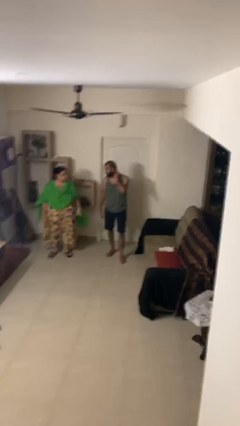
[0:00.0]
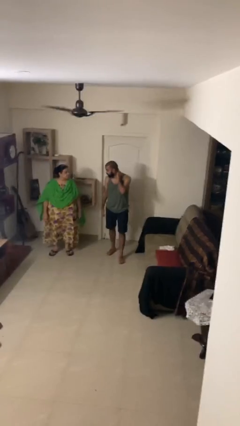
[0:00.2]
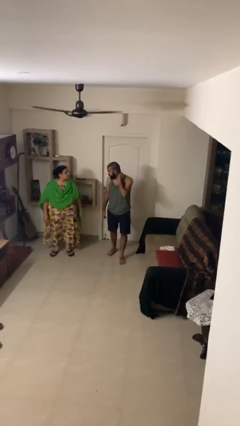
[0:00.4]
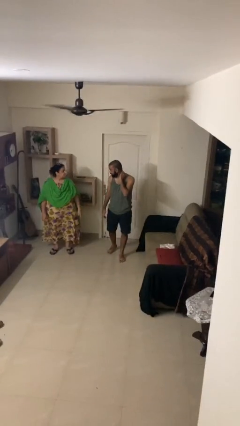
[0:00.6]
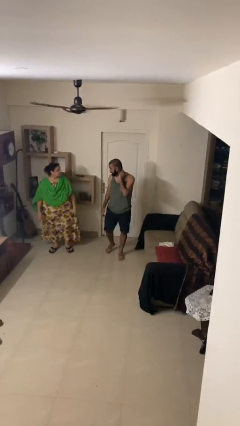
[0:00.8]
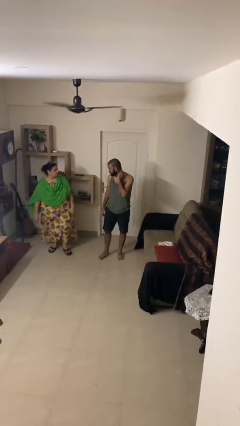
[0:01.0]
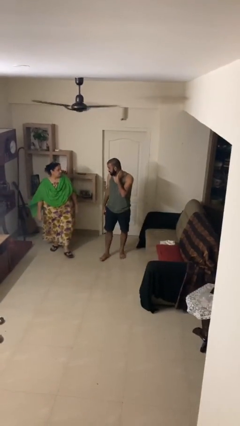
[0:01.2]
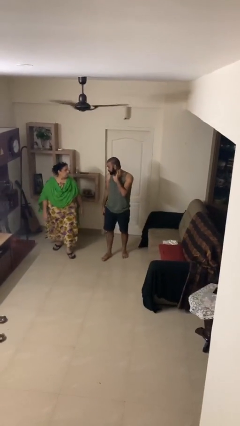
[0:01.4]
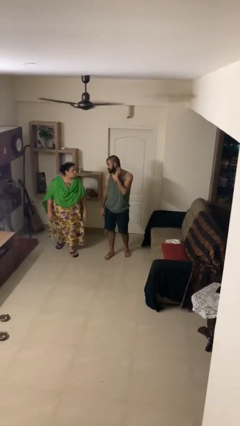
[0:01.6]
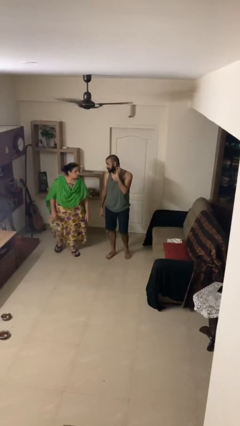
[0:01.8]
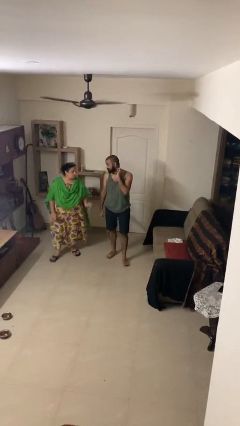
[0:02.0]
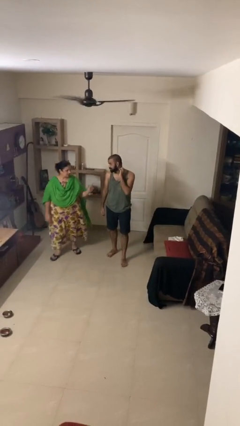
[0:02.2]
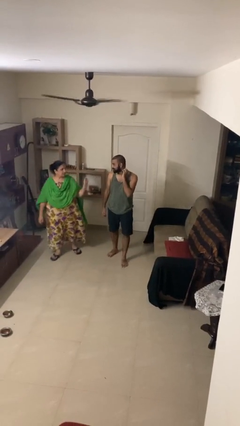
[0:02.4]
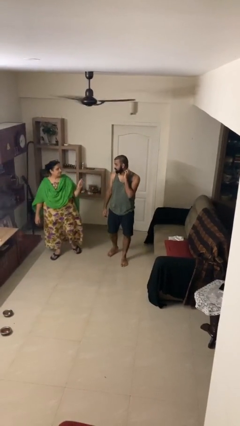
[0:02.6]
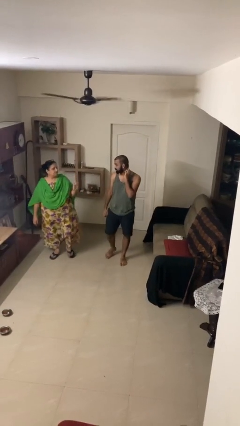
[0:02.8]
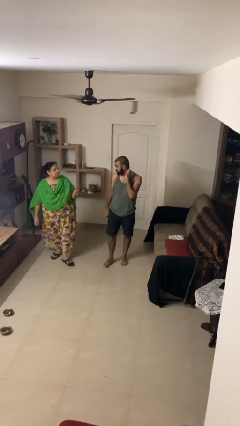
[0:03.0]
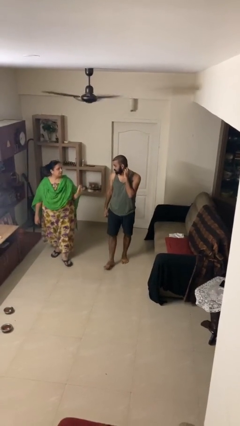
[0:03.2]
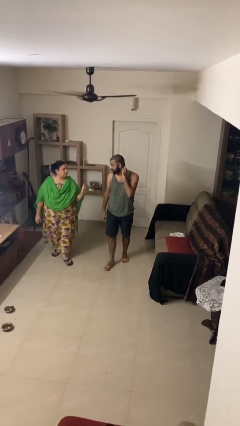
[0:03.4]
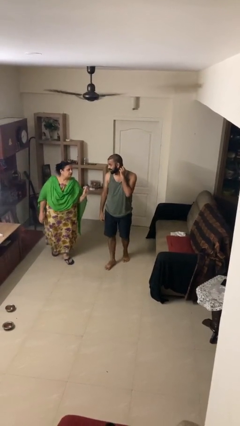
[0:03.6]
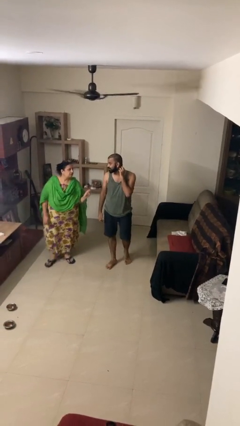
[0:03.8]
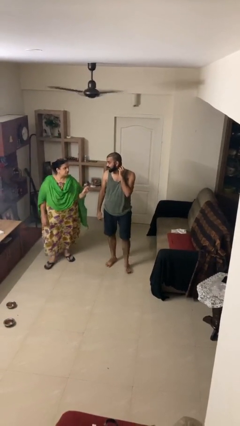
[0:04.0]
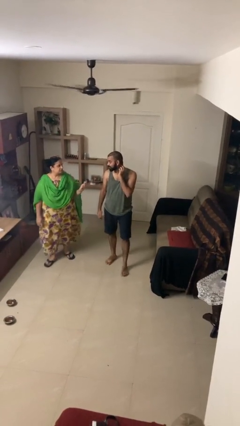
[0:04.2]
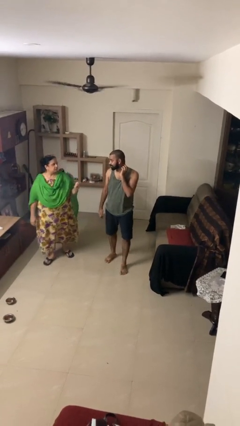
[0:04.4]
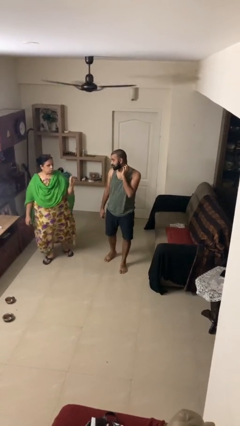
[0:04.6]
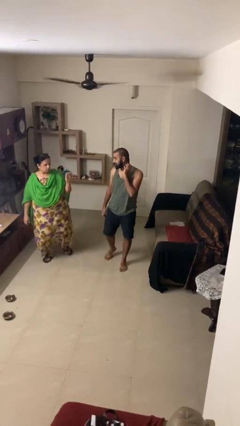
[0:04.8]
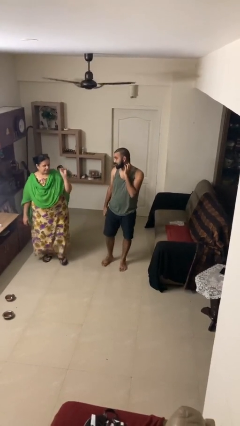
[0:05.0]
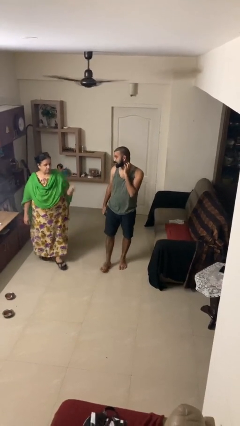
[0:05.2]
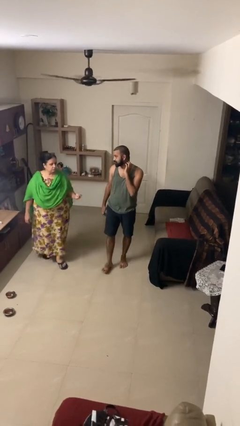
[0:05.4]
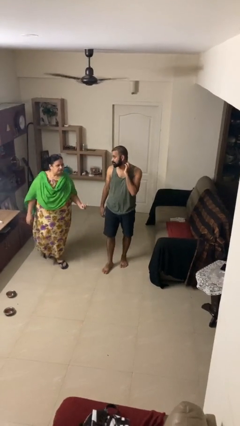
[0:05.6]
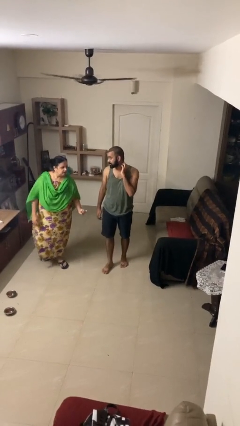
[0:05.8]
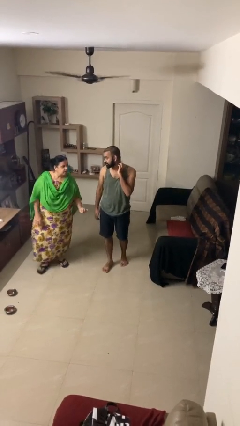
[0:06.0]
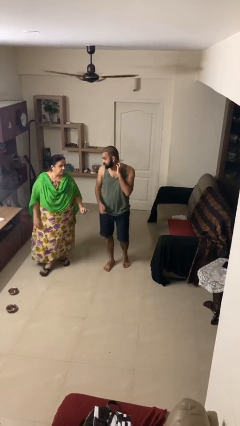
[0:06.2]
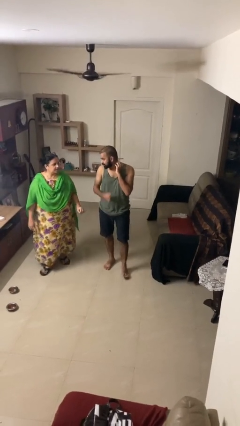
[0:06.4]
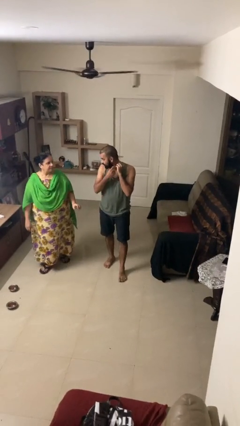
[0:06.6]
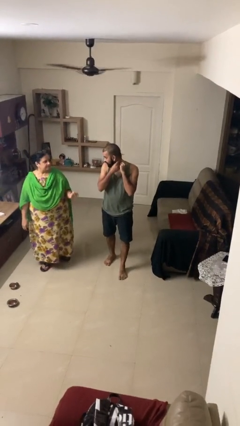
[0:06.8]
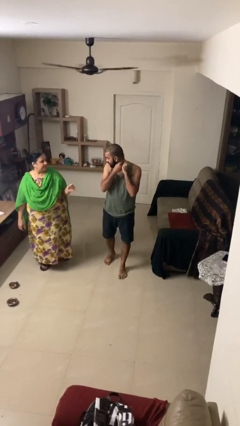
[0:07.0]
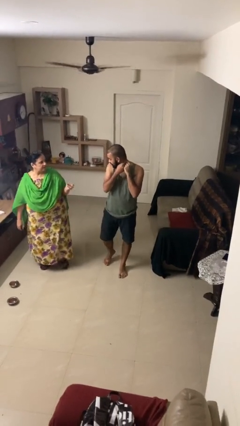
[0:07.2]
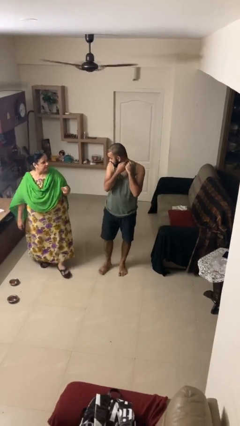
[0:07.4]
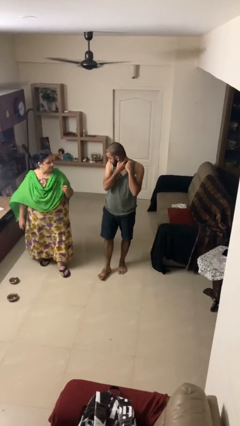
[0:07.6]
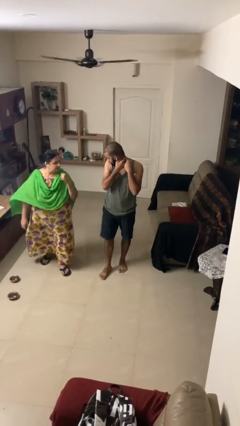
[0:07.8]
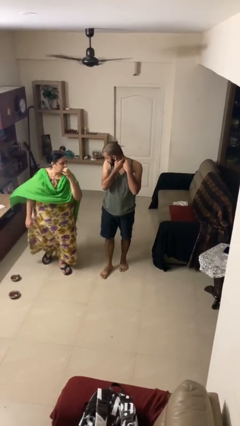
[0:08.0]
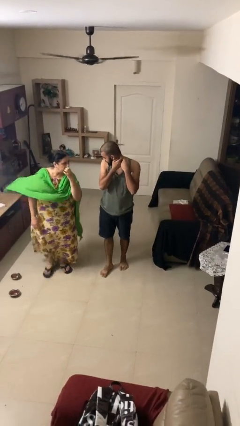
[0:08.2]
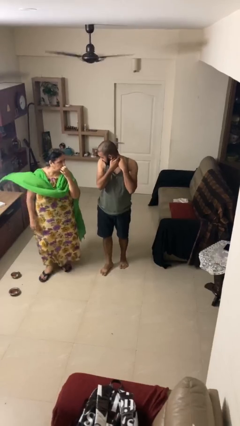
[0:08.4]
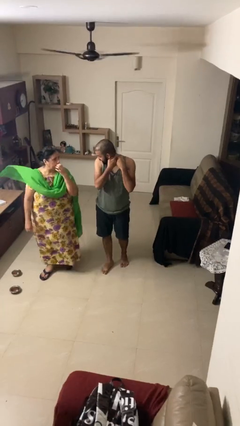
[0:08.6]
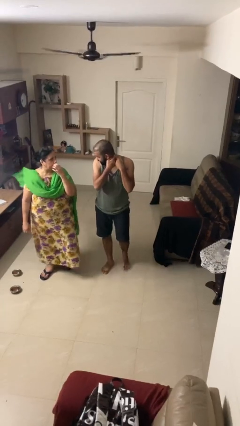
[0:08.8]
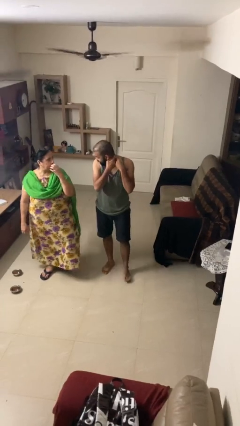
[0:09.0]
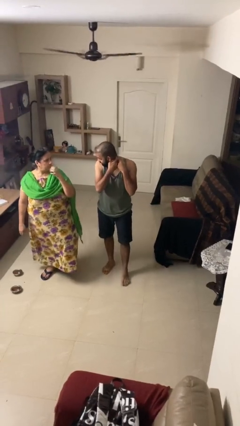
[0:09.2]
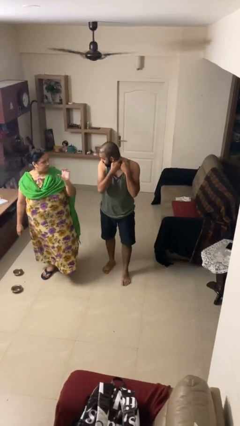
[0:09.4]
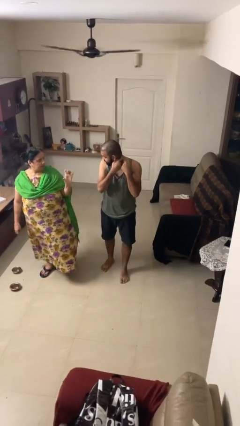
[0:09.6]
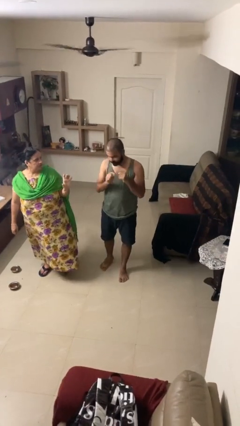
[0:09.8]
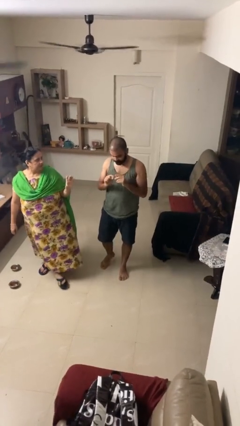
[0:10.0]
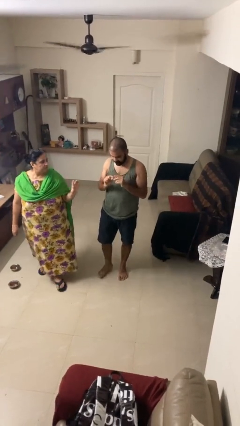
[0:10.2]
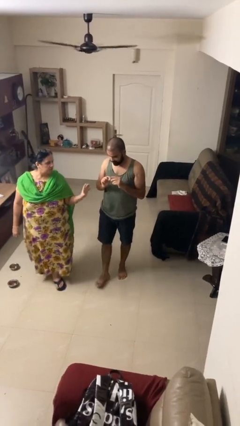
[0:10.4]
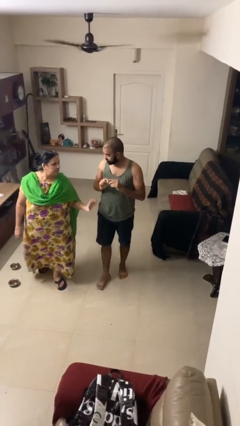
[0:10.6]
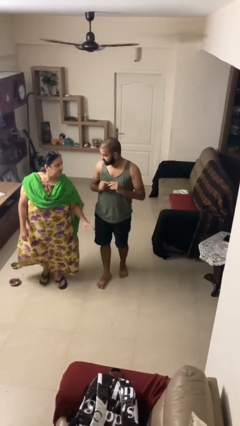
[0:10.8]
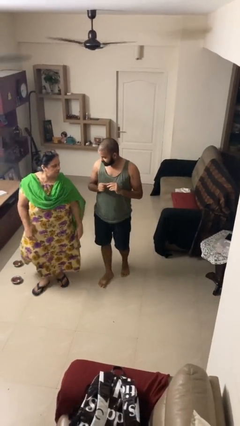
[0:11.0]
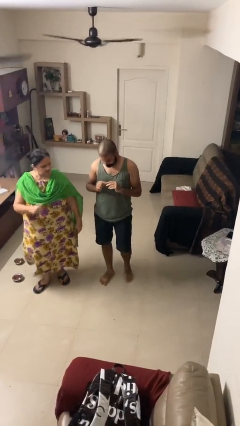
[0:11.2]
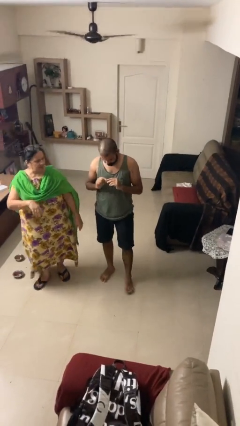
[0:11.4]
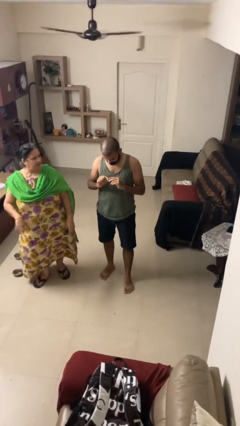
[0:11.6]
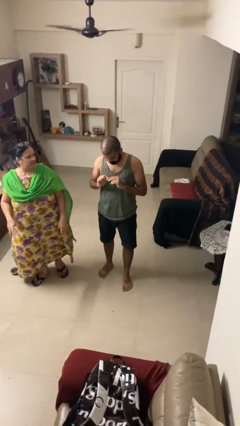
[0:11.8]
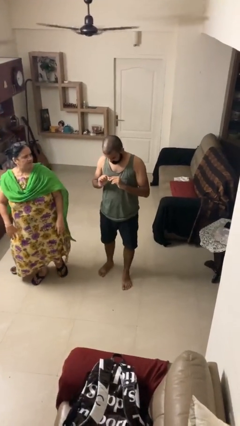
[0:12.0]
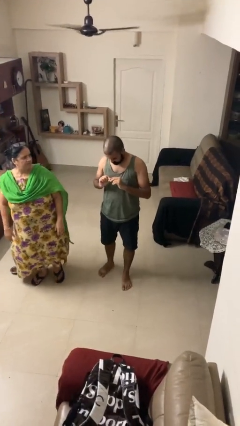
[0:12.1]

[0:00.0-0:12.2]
person talks to person

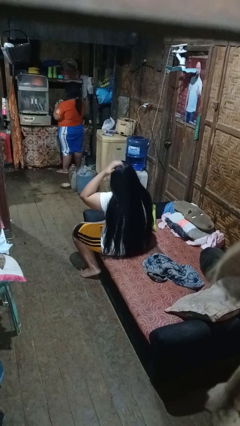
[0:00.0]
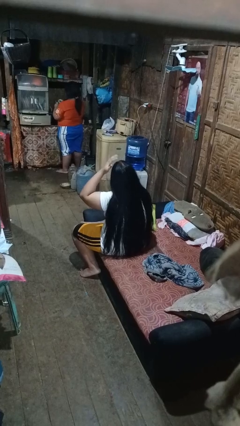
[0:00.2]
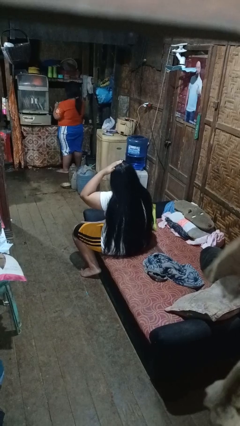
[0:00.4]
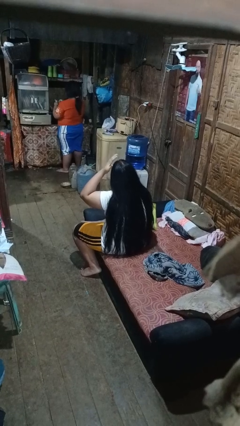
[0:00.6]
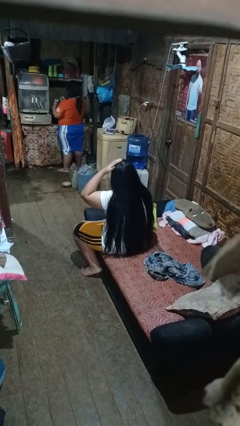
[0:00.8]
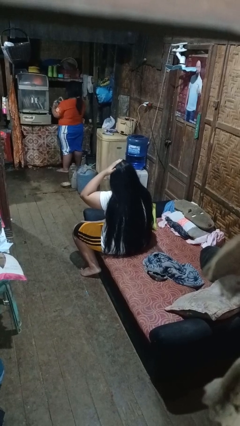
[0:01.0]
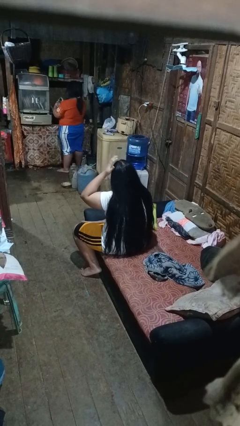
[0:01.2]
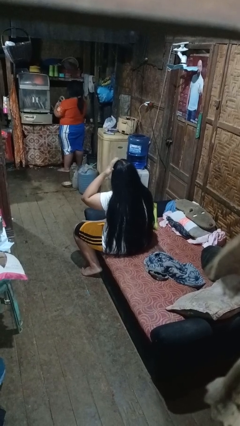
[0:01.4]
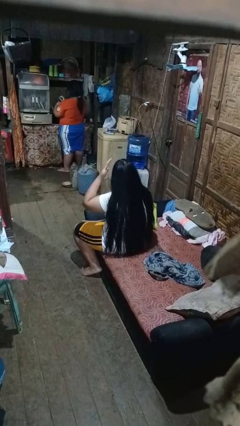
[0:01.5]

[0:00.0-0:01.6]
person pats head

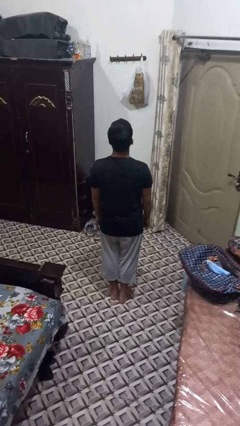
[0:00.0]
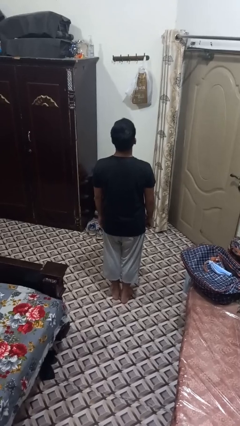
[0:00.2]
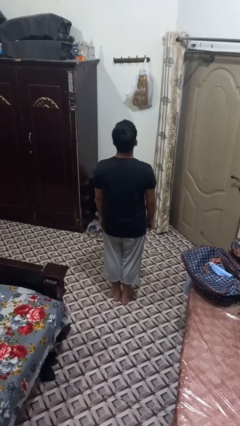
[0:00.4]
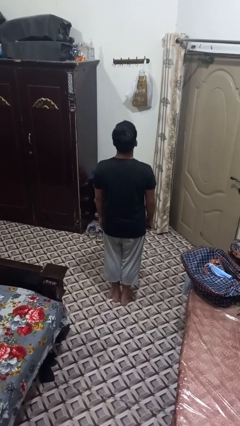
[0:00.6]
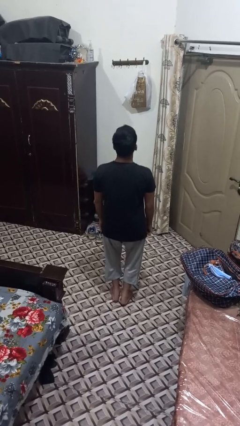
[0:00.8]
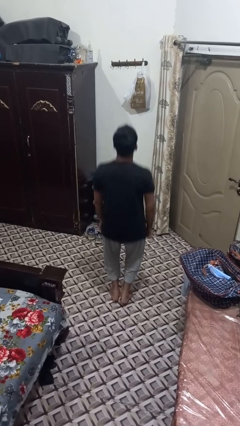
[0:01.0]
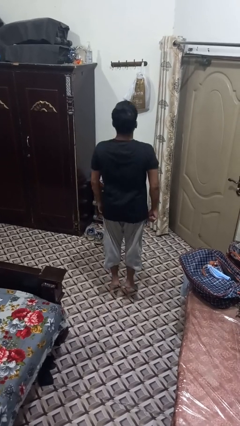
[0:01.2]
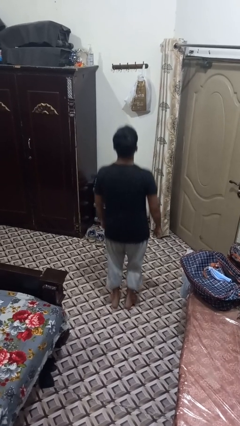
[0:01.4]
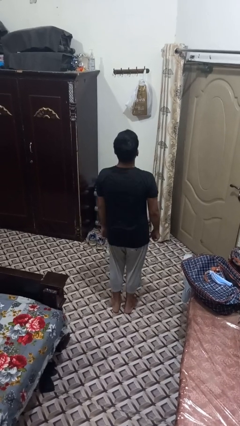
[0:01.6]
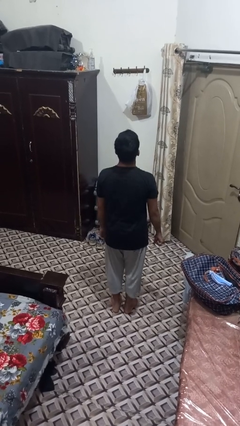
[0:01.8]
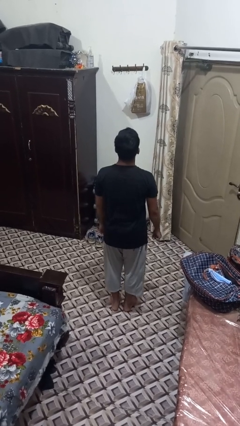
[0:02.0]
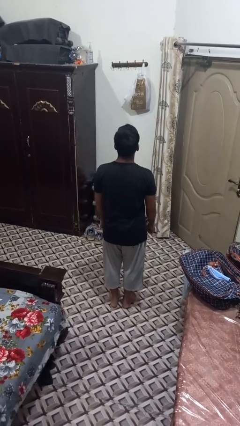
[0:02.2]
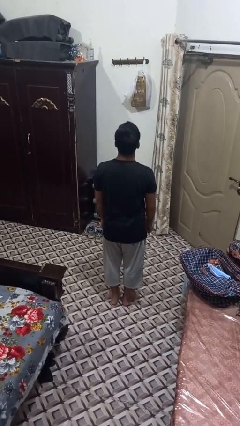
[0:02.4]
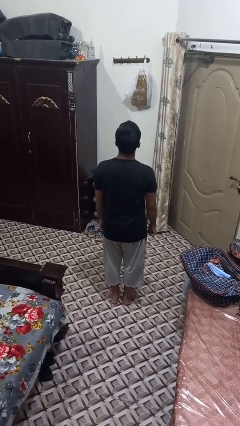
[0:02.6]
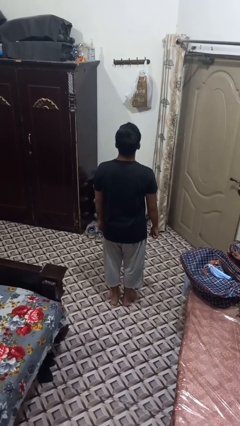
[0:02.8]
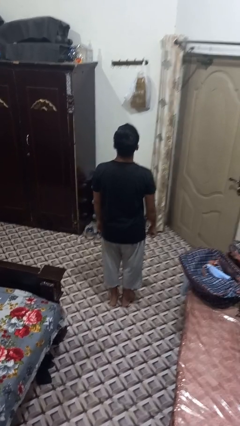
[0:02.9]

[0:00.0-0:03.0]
person jumps

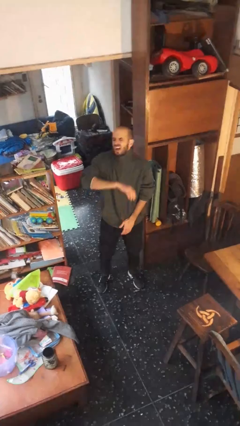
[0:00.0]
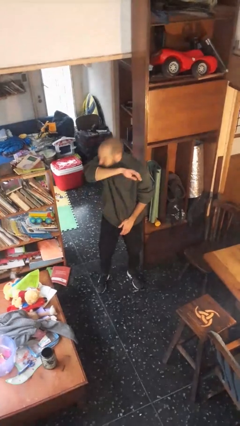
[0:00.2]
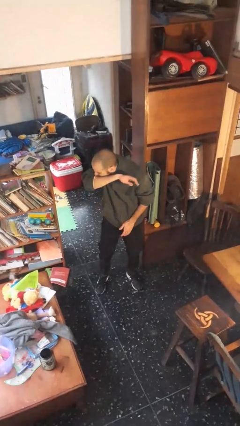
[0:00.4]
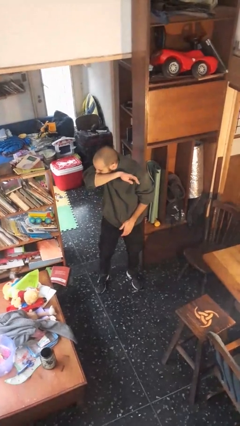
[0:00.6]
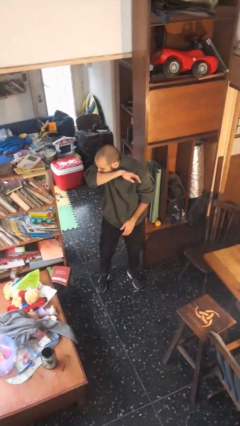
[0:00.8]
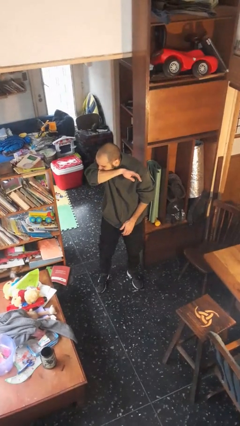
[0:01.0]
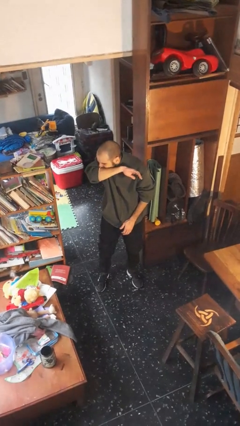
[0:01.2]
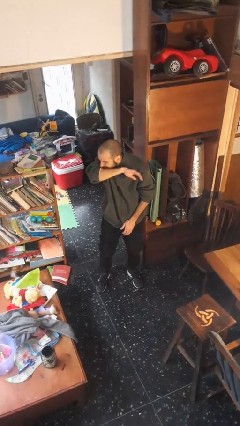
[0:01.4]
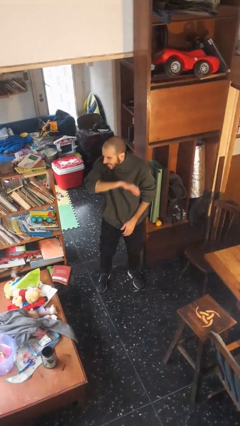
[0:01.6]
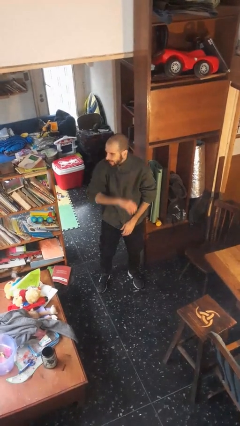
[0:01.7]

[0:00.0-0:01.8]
person sneezes into arm
